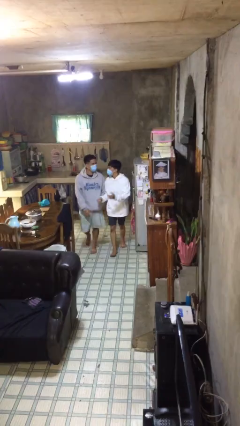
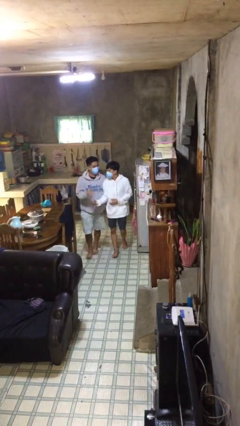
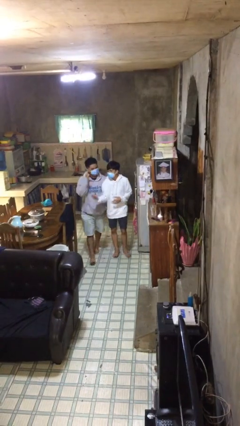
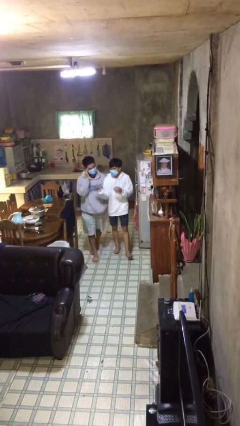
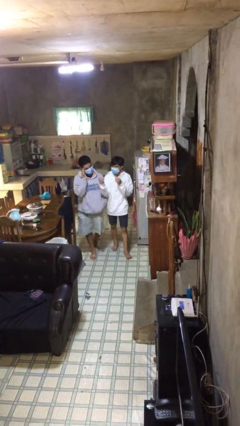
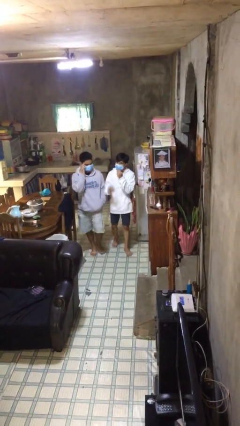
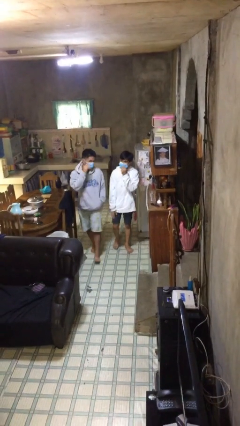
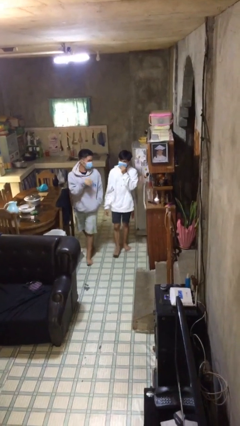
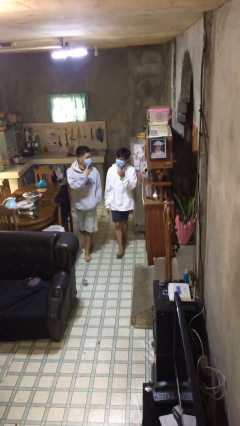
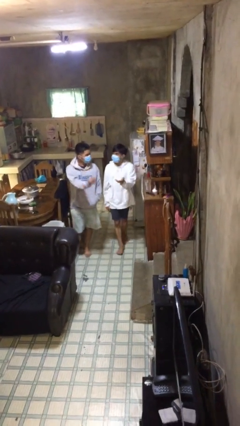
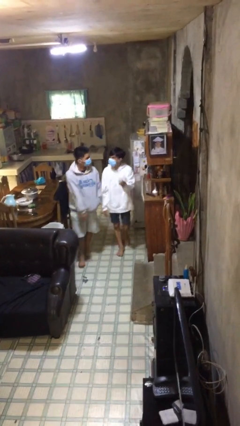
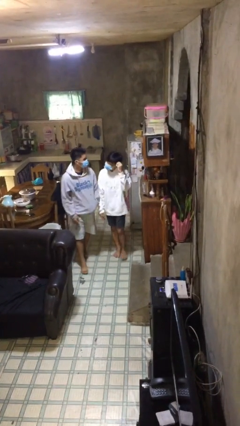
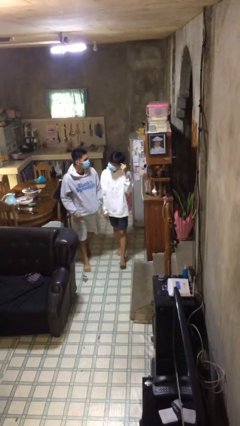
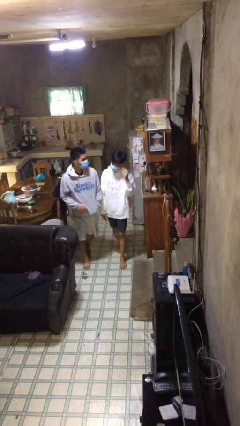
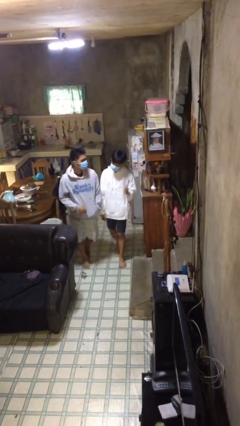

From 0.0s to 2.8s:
person talks to person

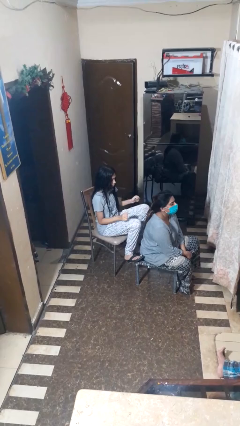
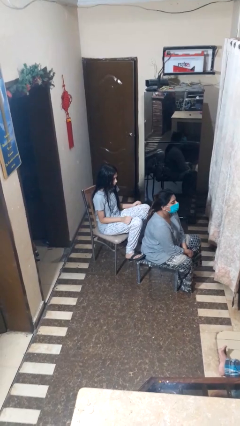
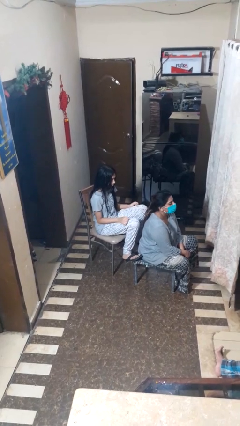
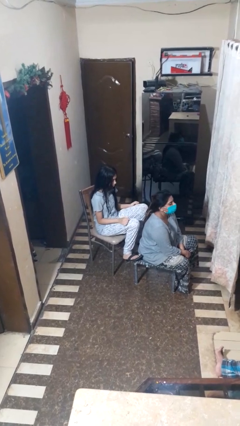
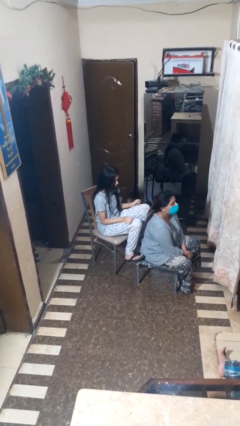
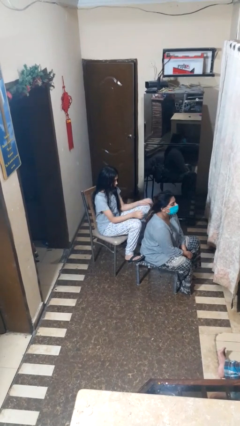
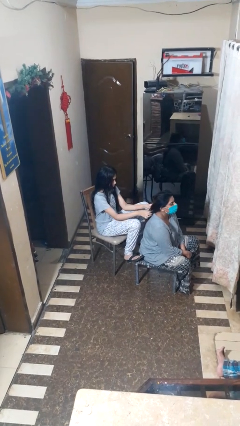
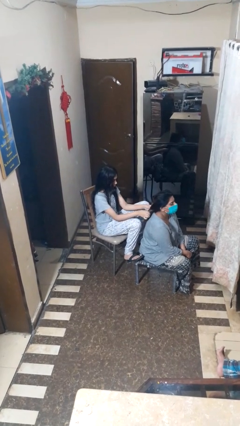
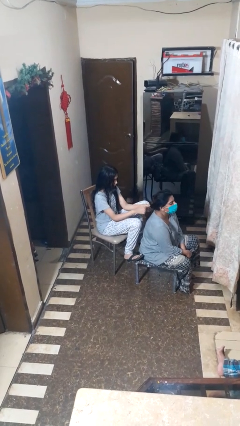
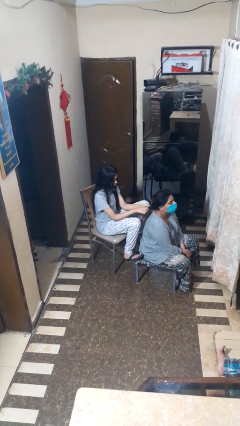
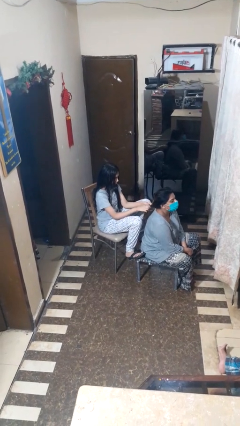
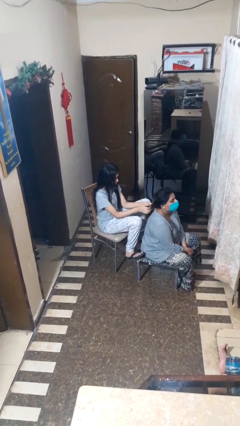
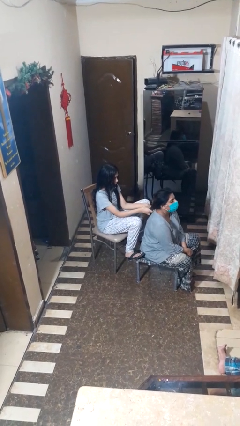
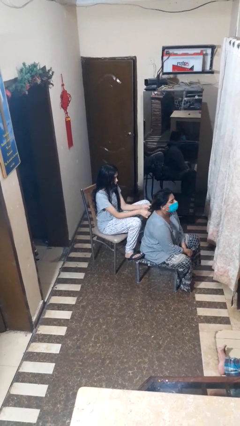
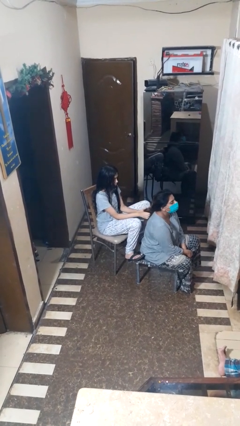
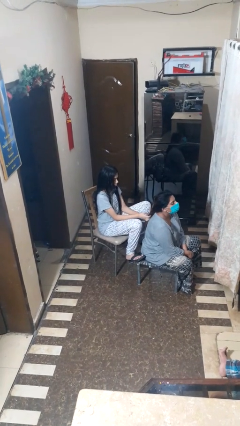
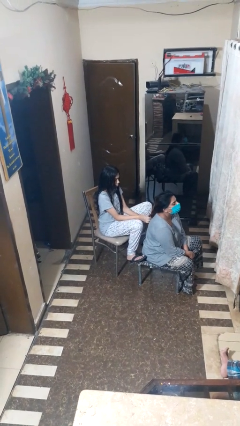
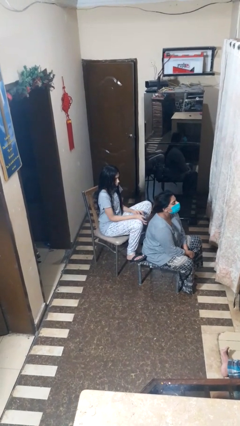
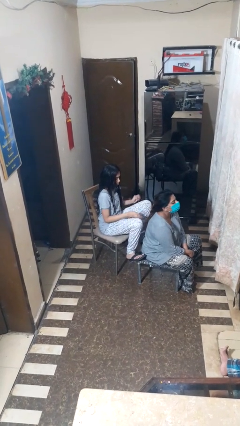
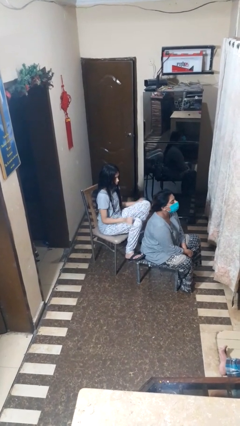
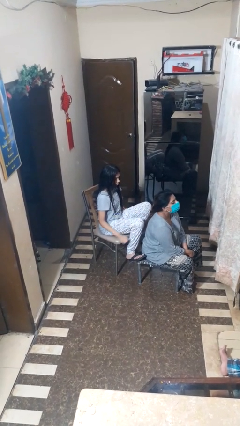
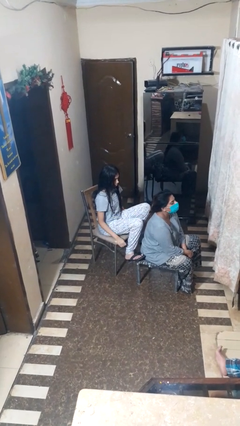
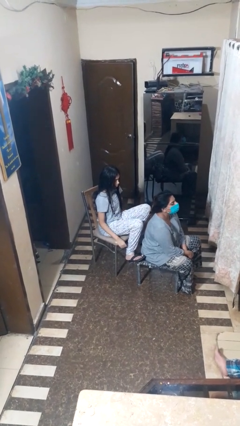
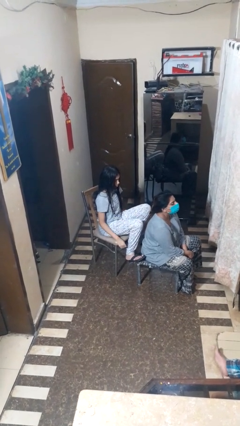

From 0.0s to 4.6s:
person braids hair of person

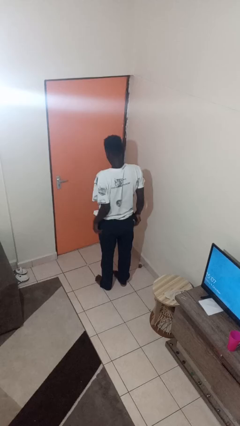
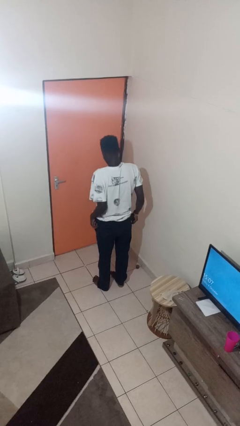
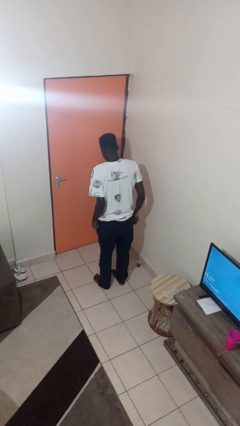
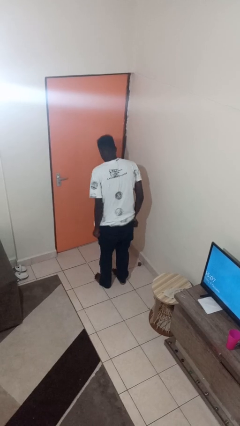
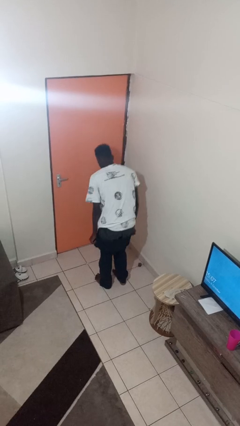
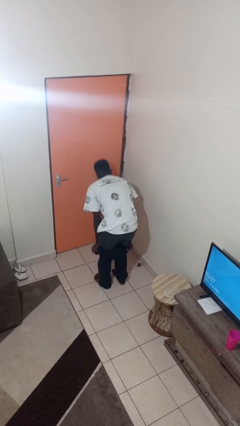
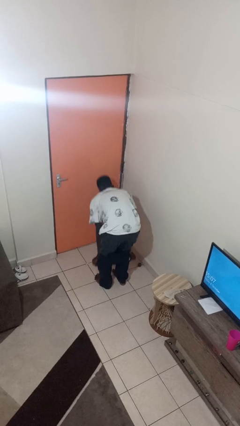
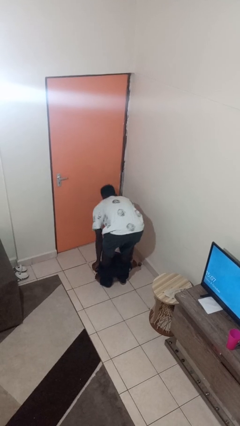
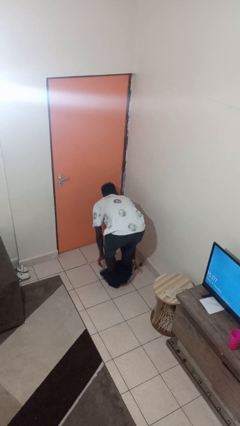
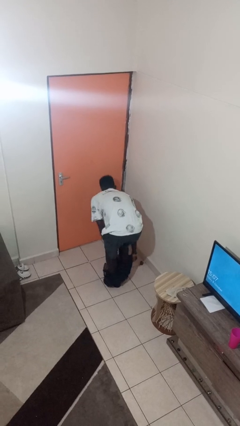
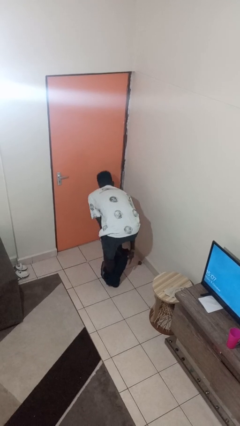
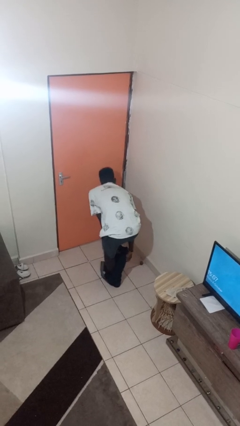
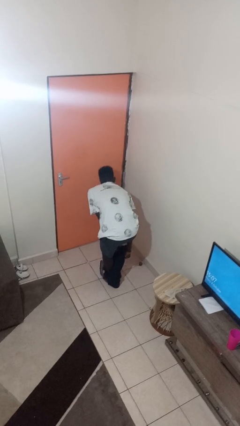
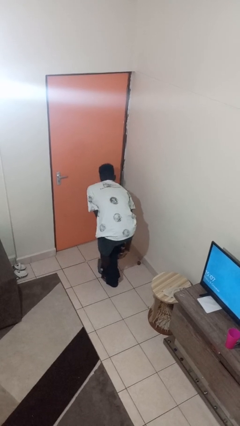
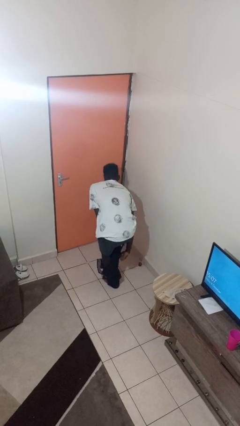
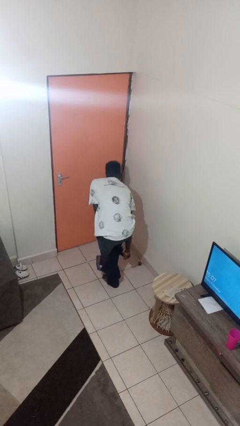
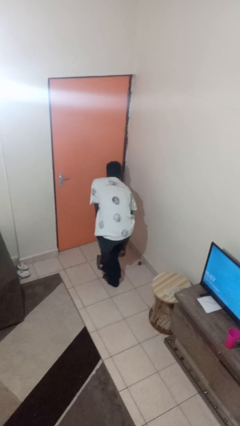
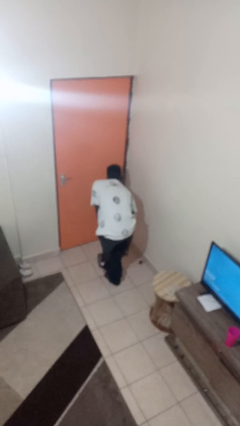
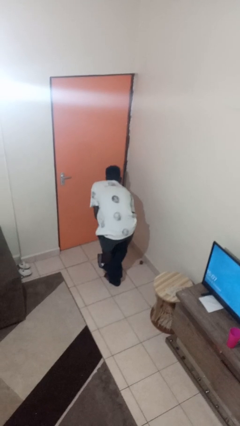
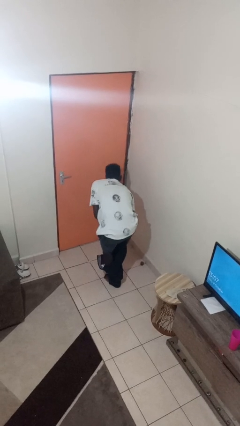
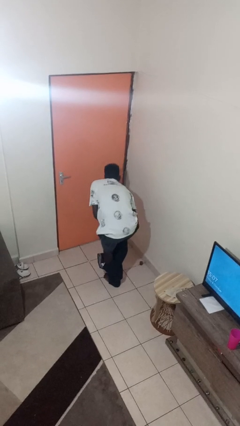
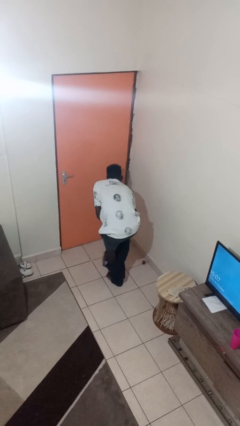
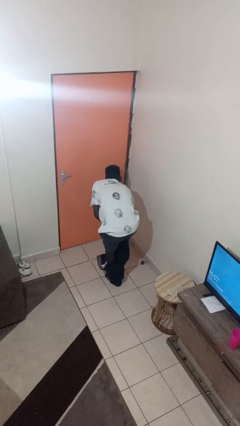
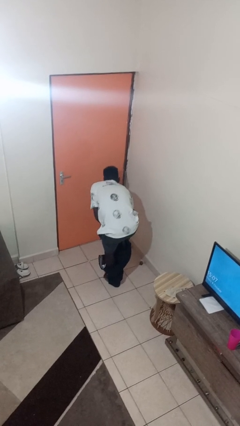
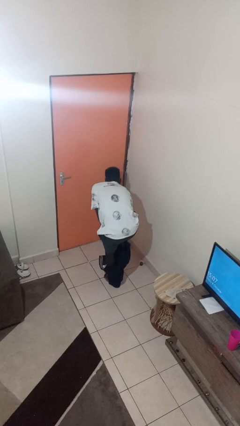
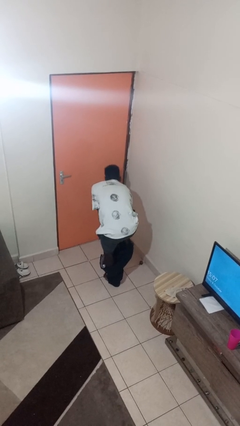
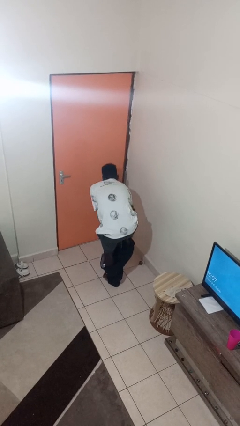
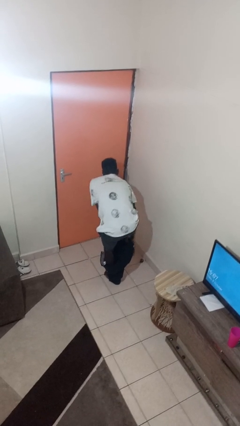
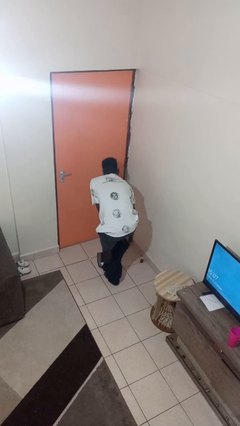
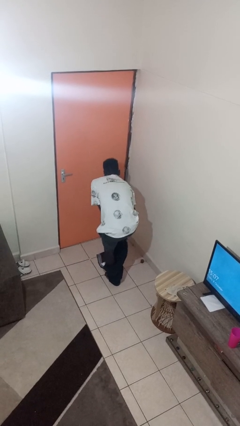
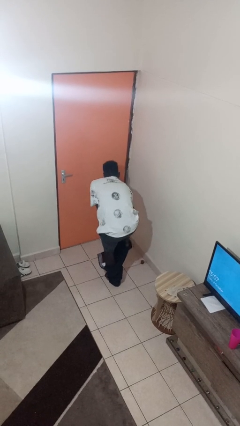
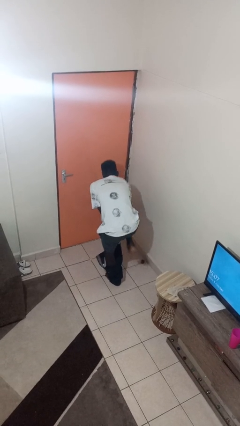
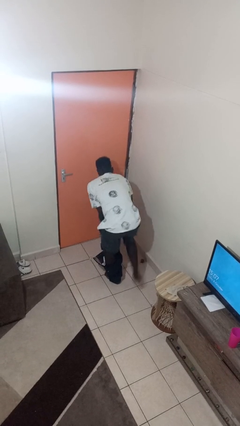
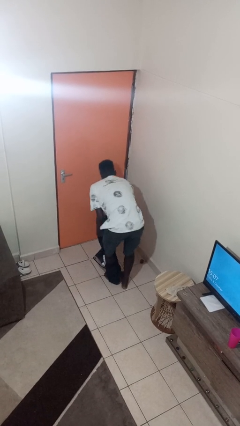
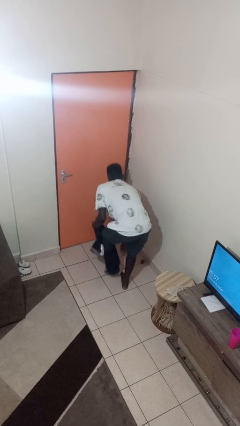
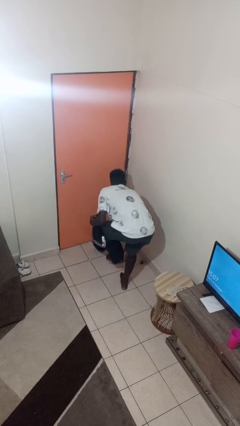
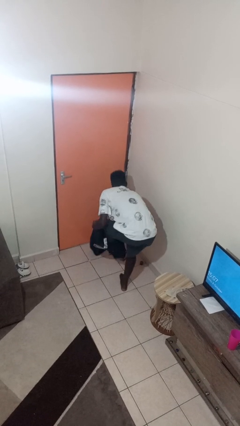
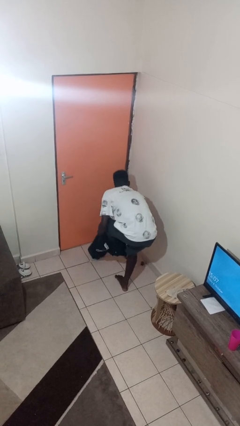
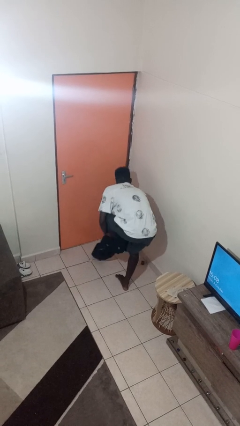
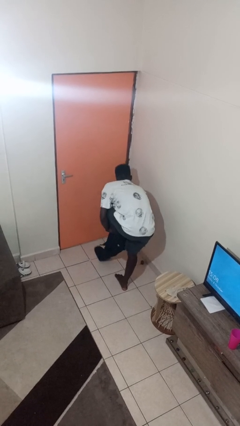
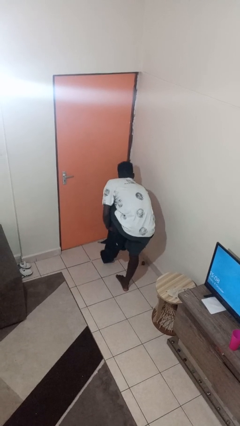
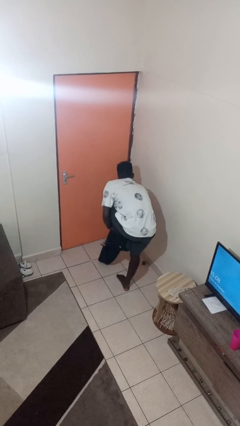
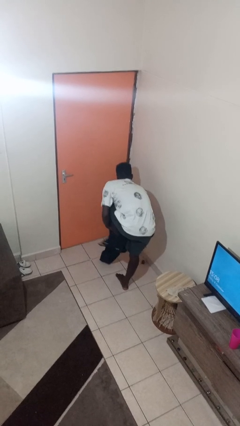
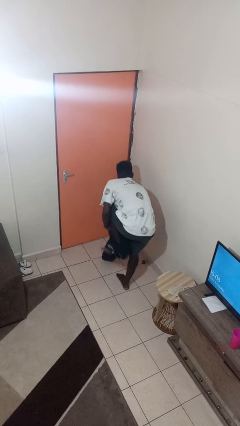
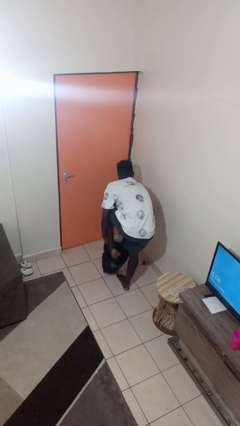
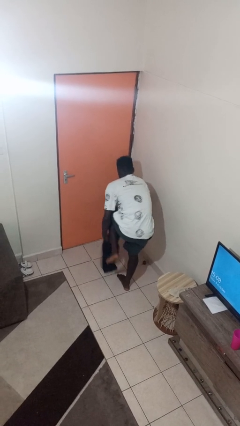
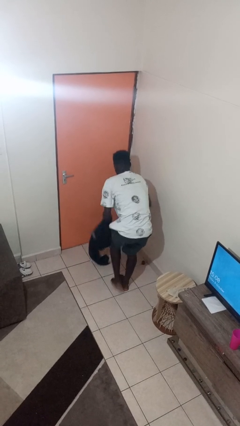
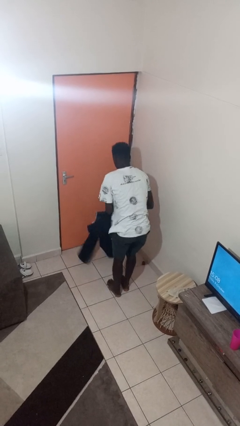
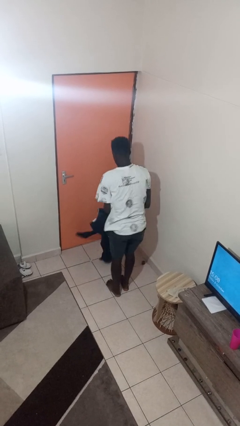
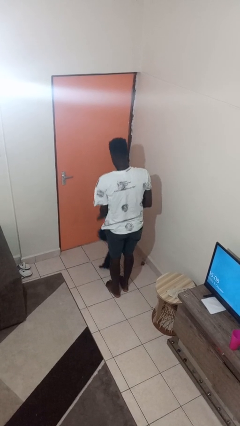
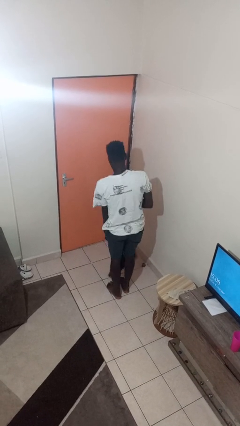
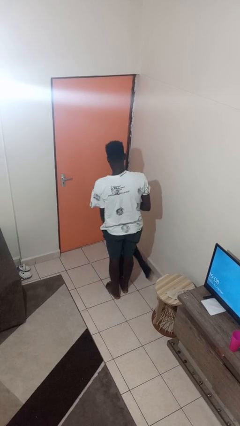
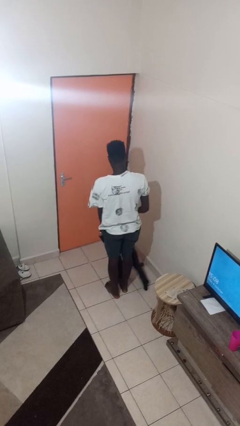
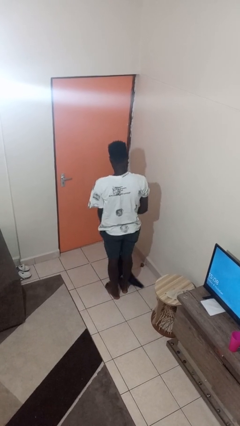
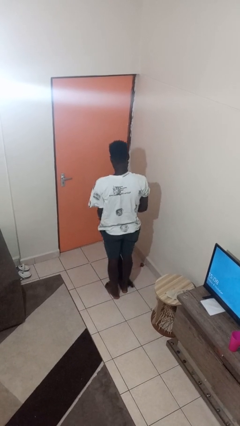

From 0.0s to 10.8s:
person takes off pants
